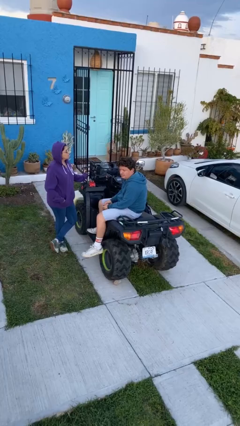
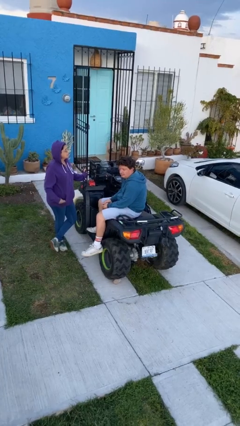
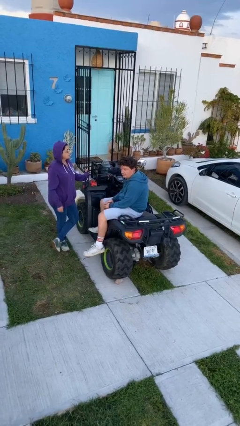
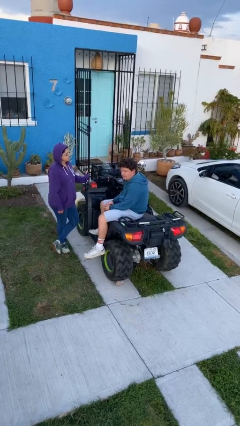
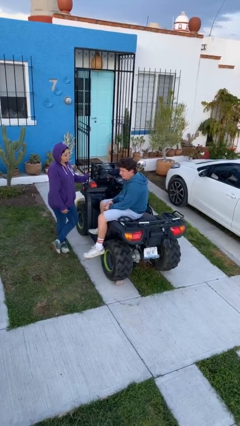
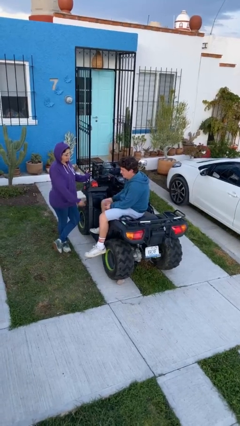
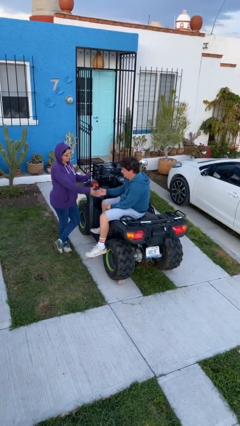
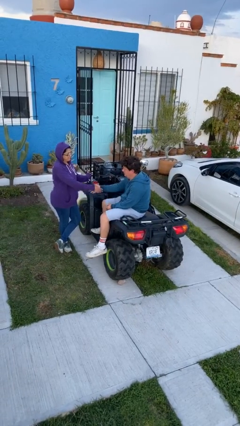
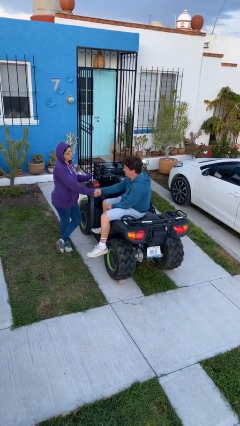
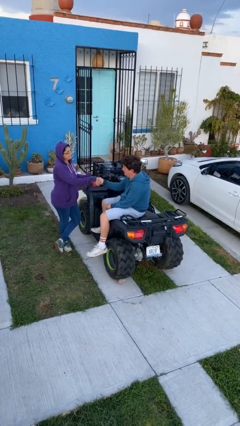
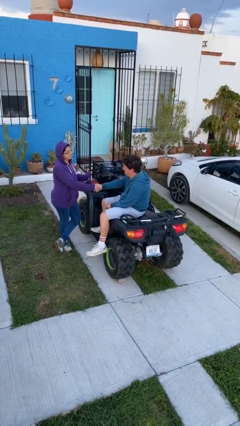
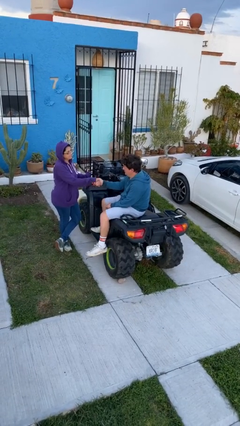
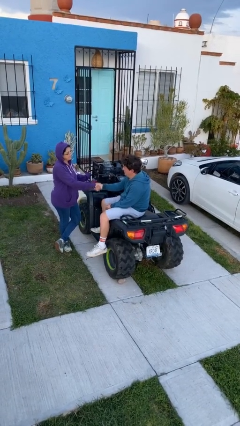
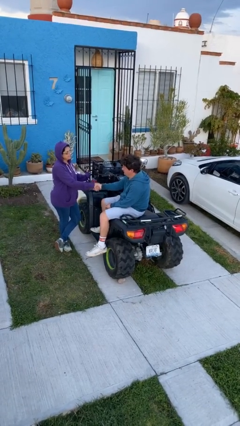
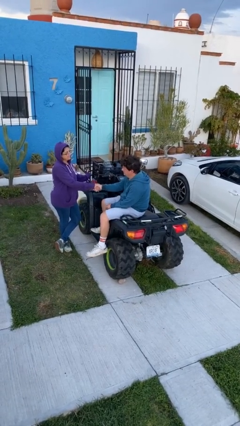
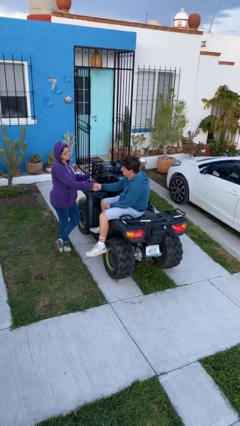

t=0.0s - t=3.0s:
person shakes hand

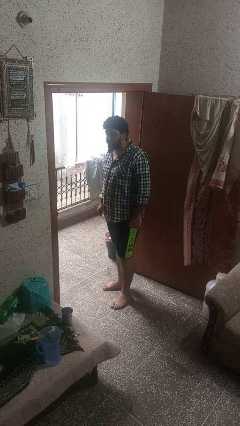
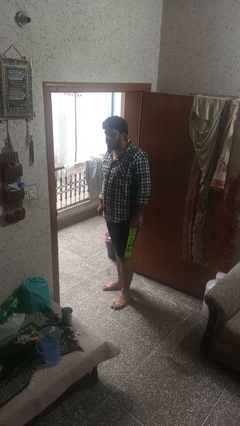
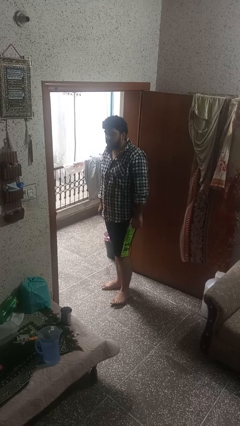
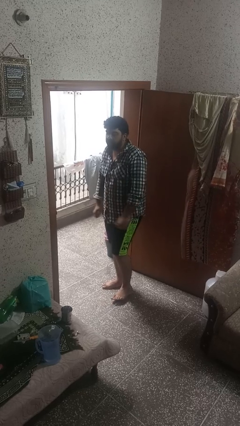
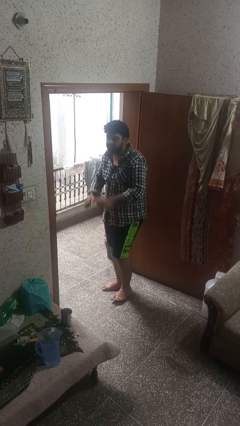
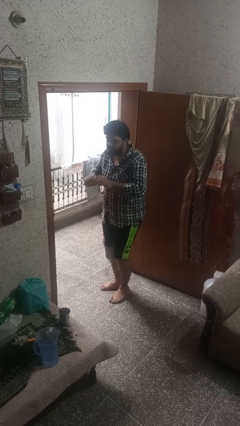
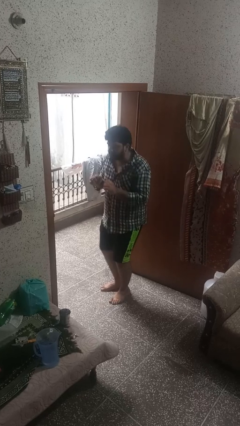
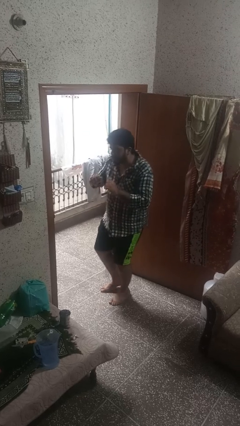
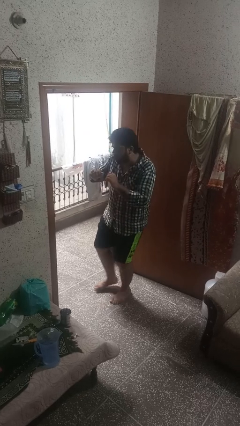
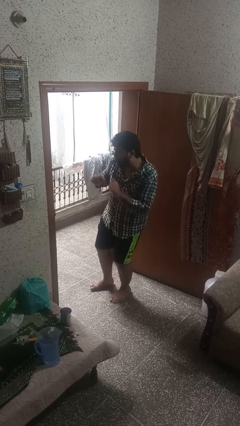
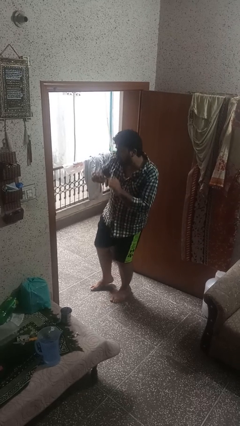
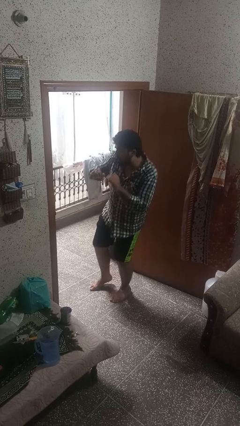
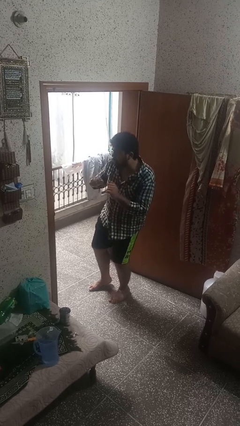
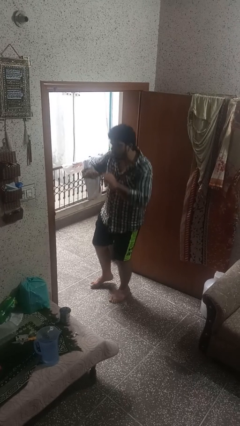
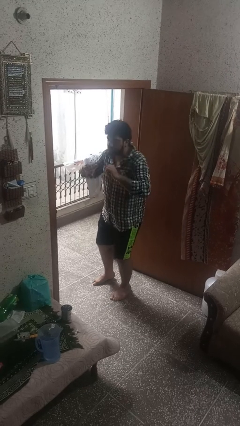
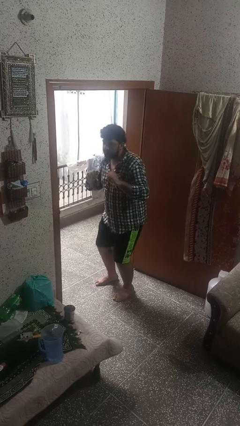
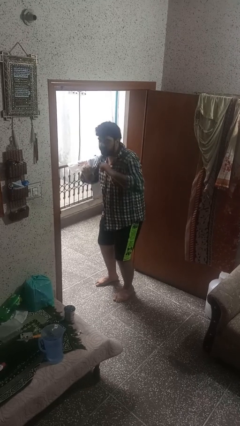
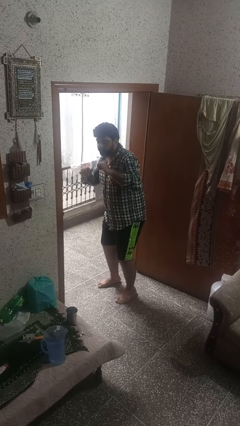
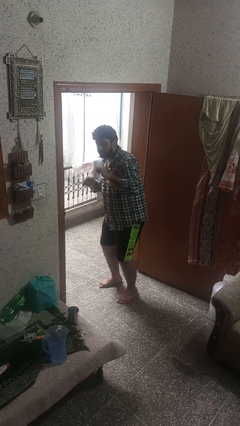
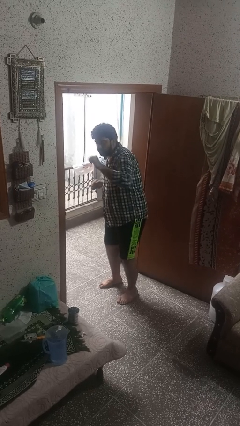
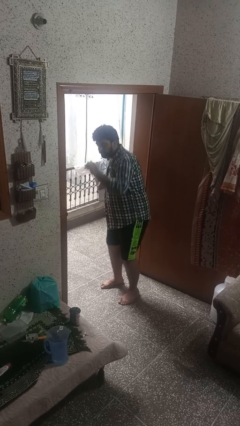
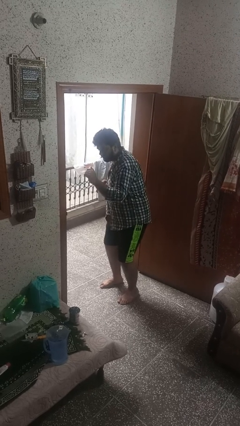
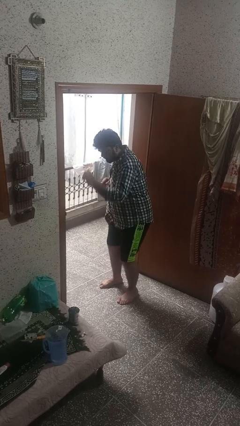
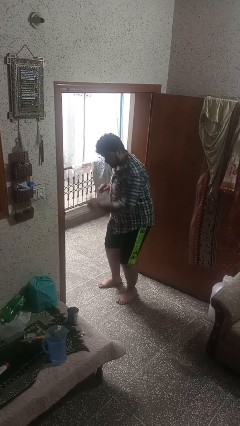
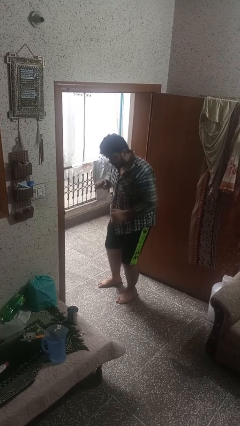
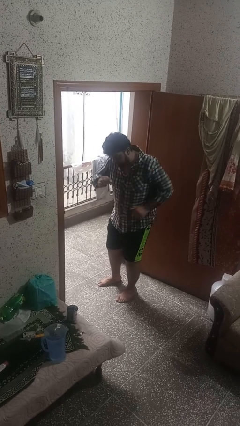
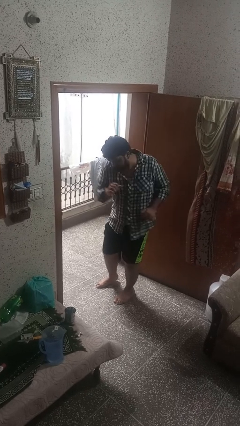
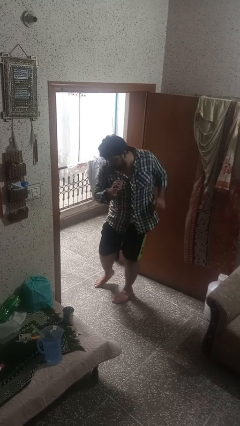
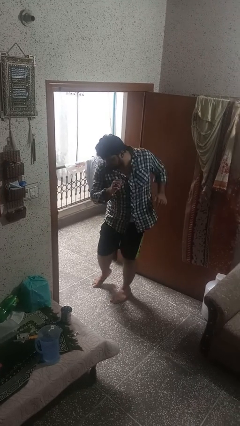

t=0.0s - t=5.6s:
person dances in place

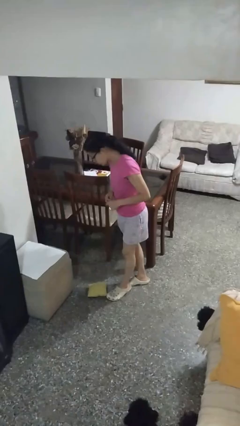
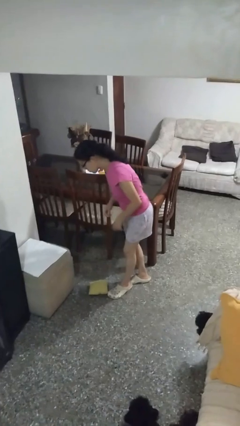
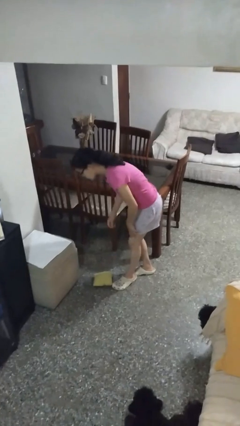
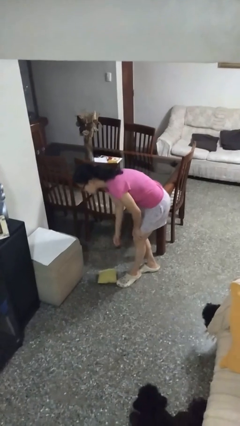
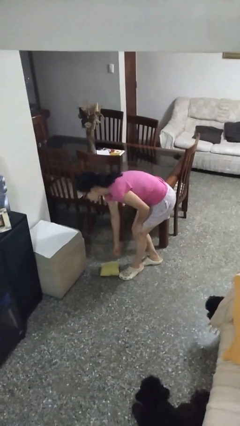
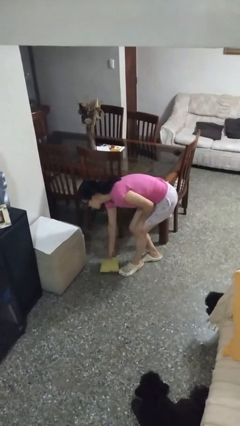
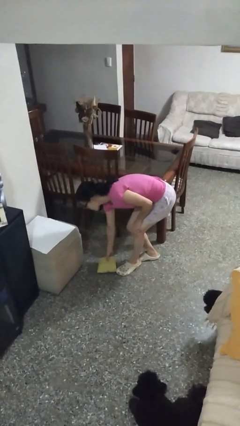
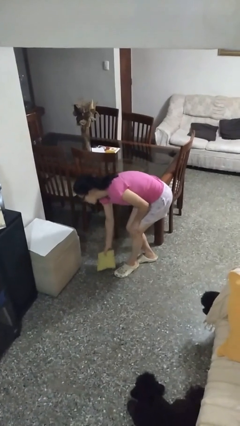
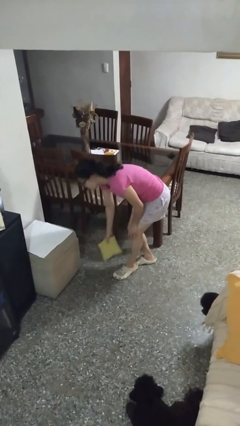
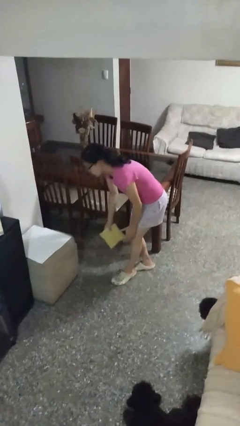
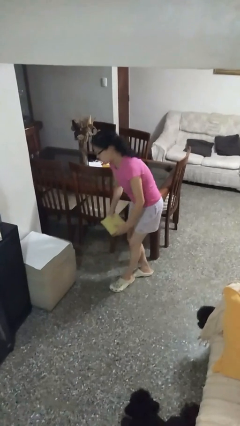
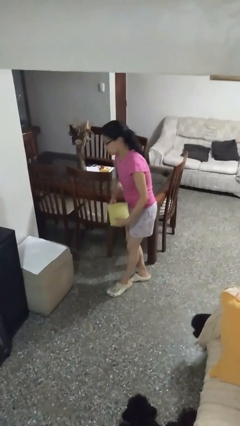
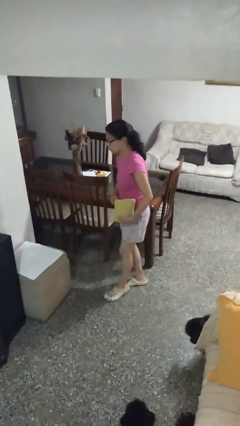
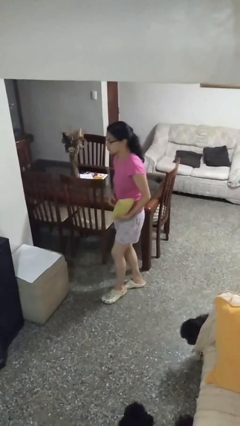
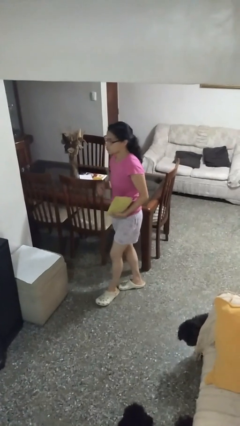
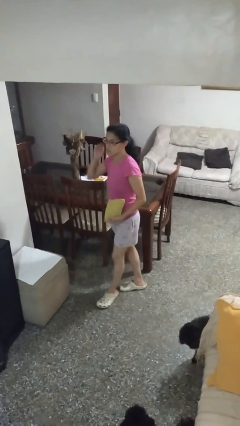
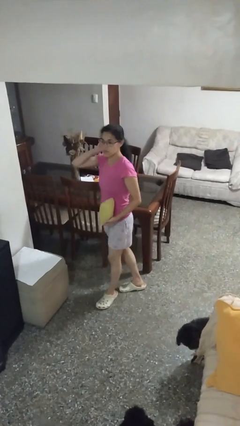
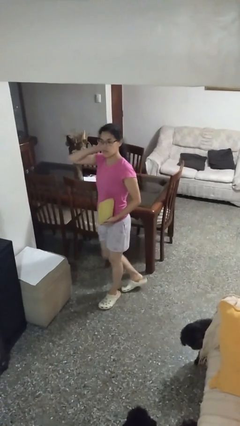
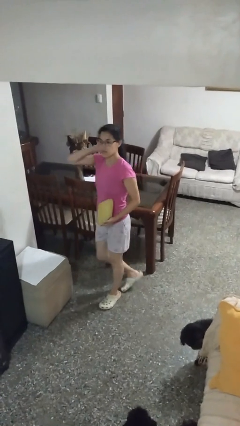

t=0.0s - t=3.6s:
person picks up object from floor

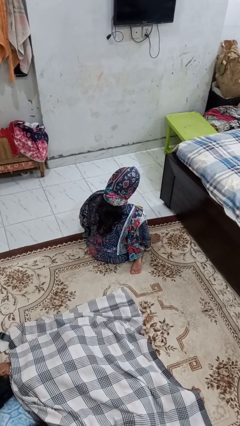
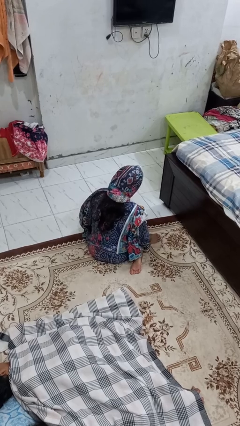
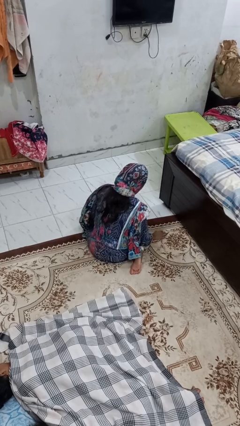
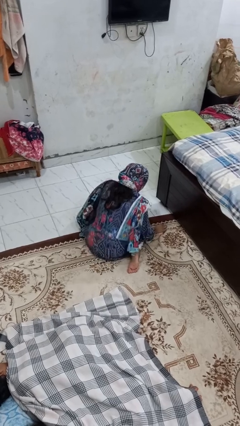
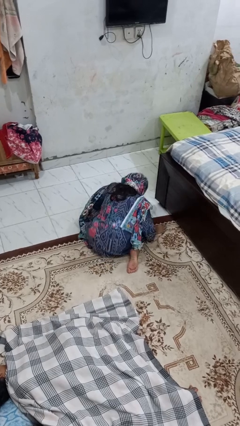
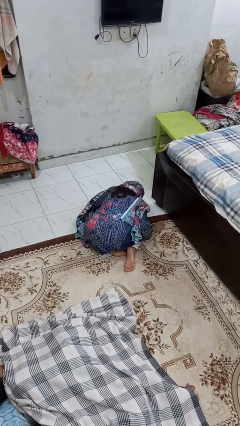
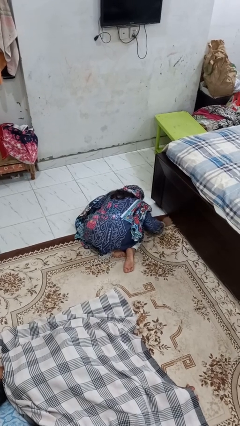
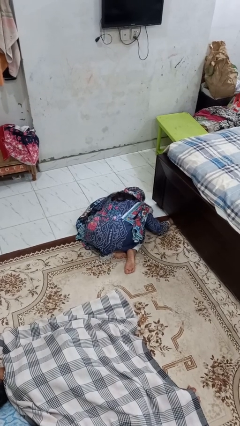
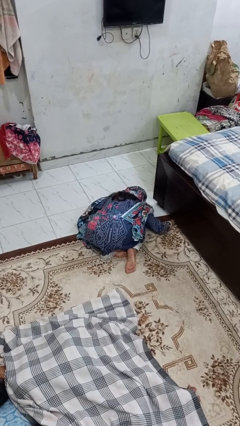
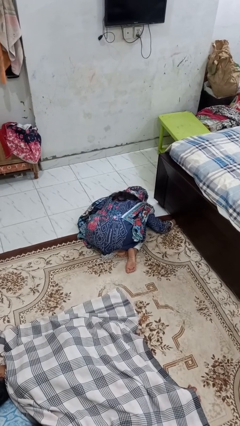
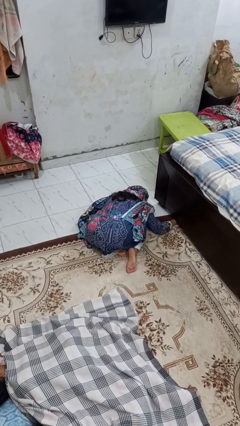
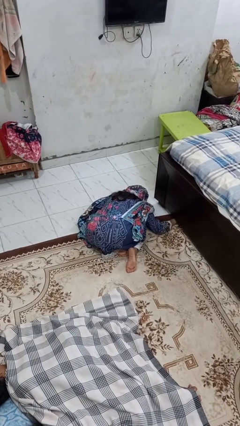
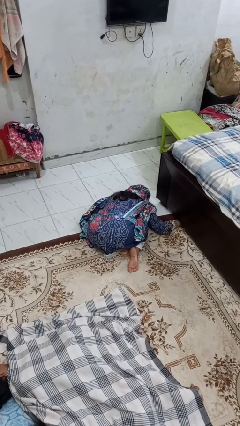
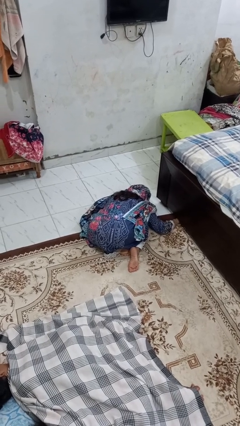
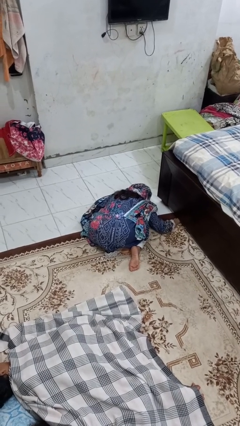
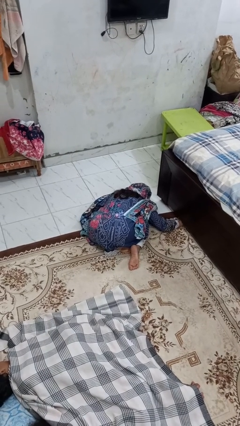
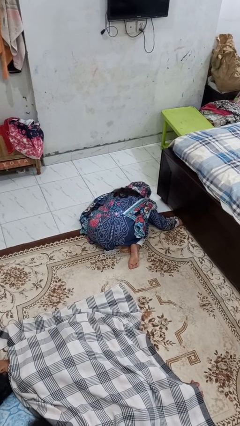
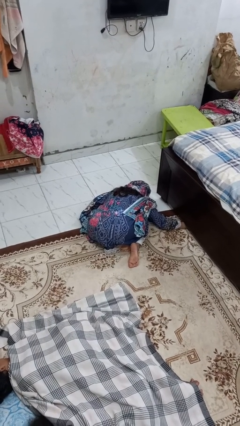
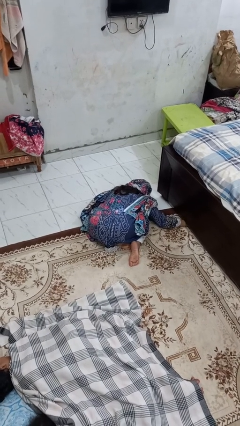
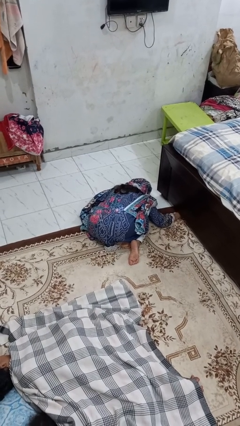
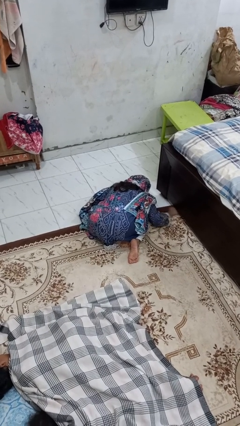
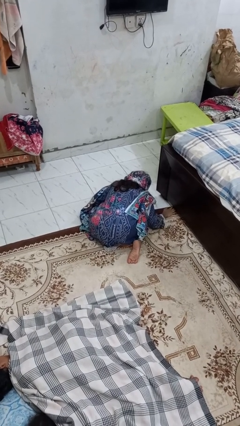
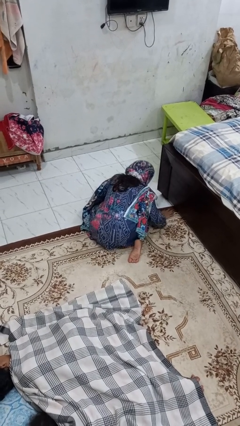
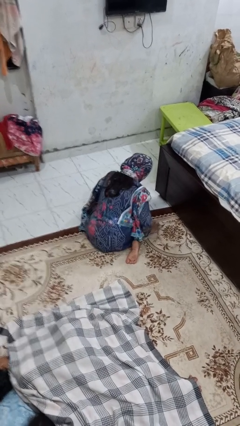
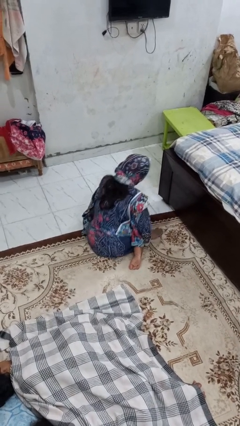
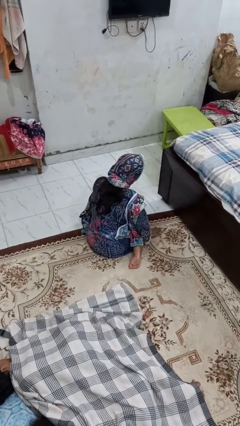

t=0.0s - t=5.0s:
person searches under bed

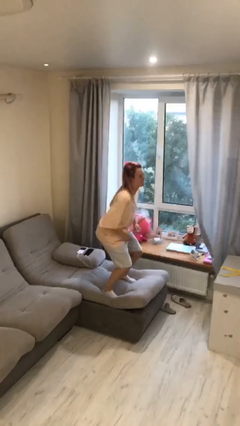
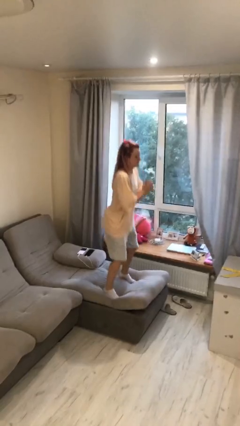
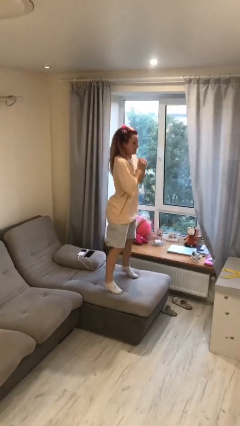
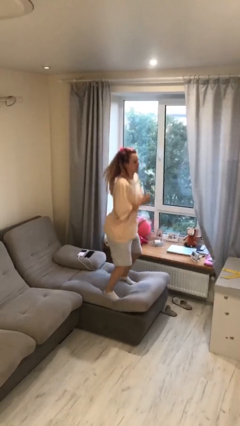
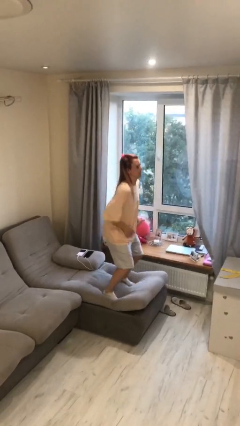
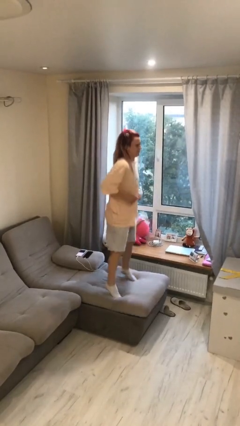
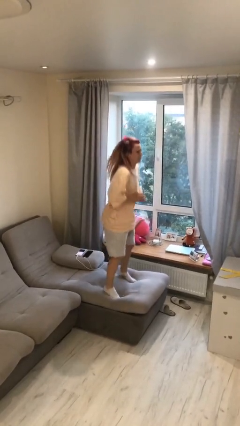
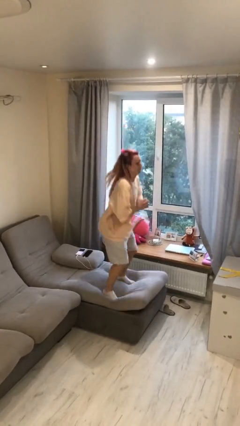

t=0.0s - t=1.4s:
person jumps on couch
